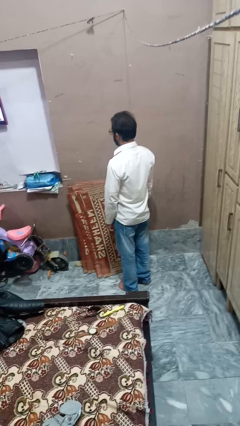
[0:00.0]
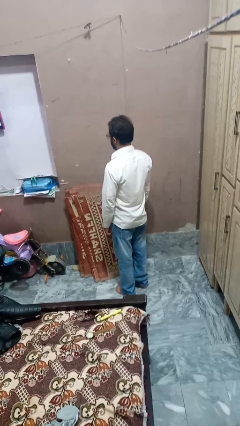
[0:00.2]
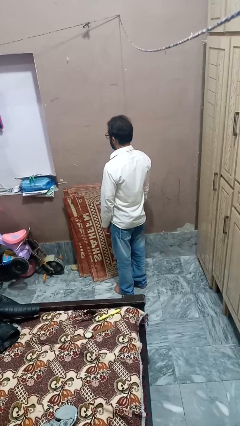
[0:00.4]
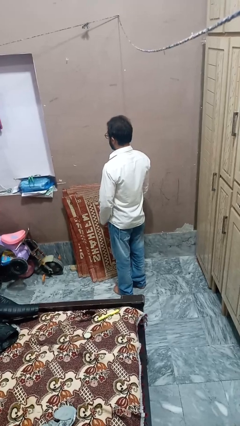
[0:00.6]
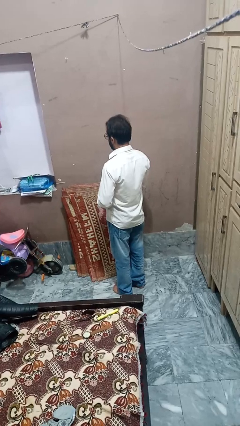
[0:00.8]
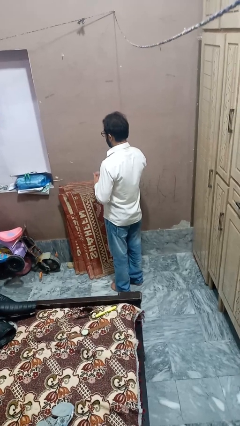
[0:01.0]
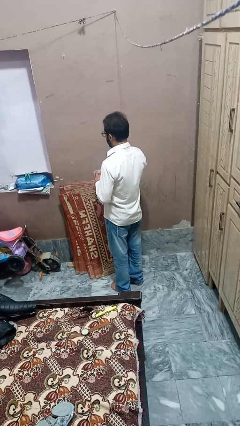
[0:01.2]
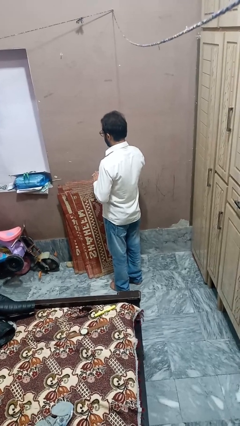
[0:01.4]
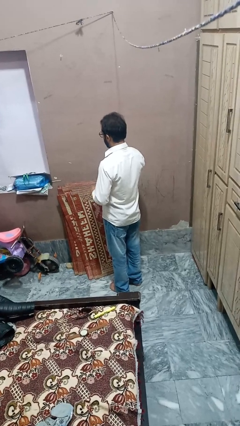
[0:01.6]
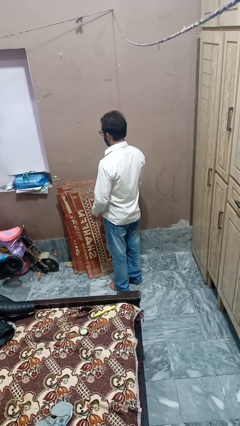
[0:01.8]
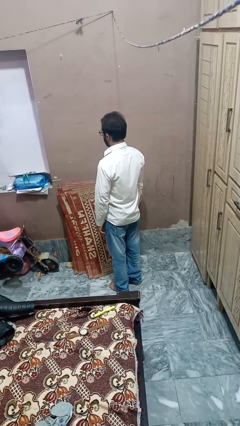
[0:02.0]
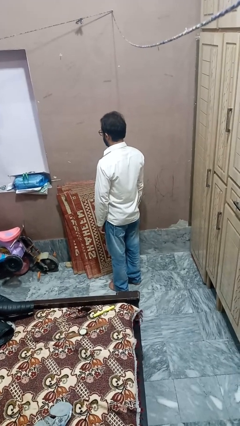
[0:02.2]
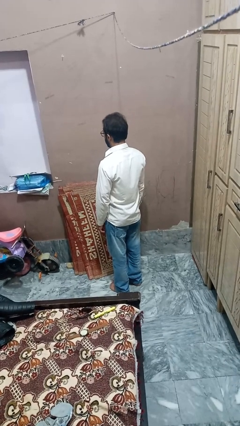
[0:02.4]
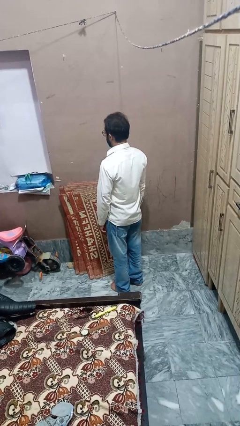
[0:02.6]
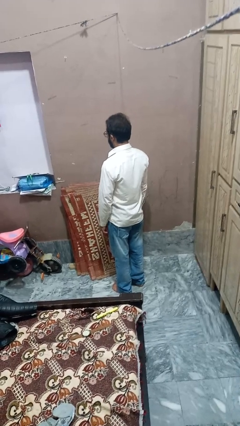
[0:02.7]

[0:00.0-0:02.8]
person puts on ring

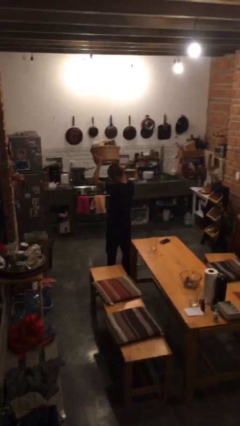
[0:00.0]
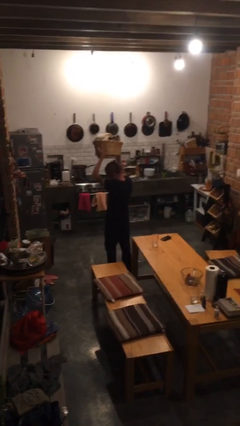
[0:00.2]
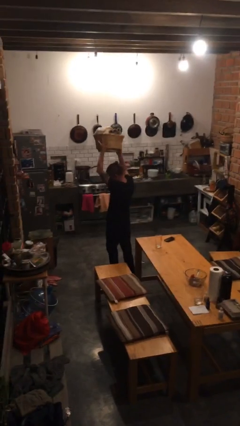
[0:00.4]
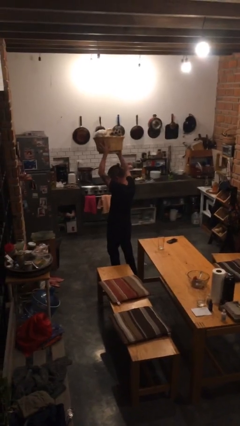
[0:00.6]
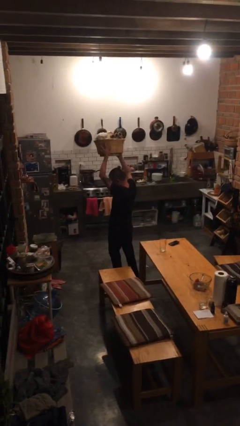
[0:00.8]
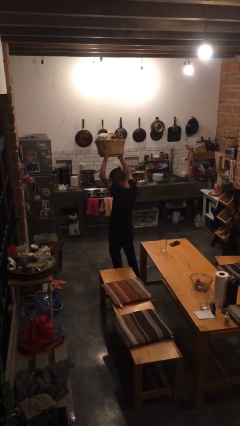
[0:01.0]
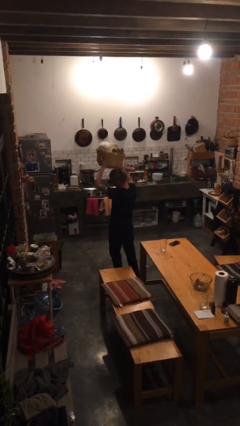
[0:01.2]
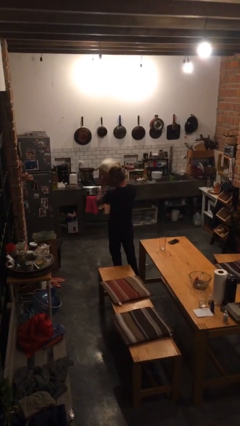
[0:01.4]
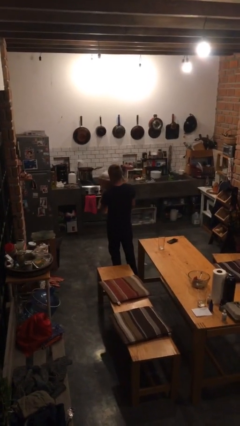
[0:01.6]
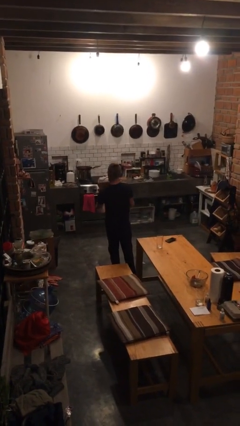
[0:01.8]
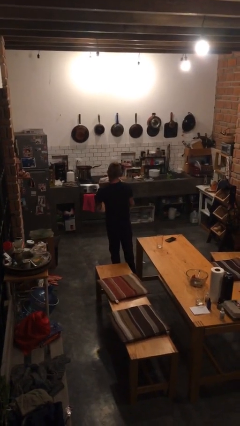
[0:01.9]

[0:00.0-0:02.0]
person holds object above head

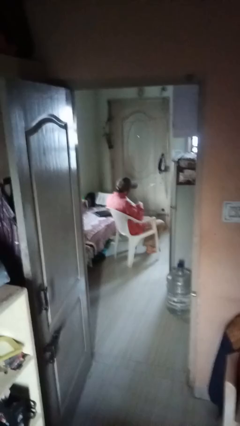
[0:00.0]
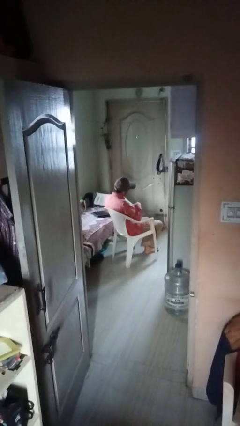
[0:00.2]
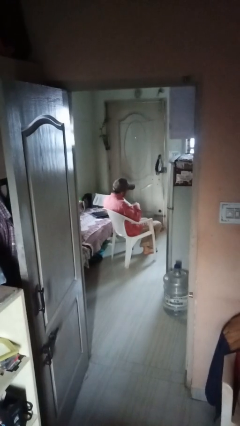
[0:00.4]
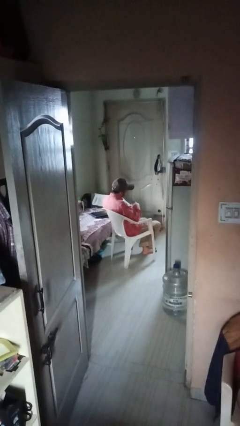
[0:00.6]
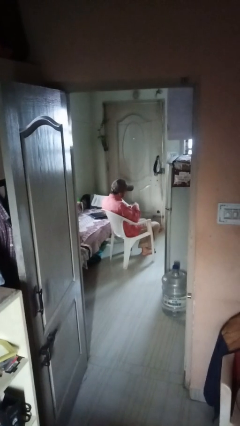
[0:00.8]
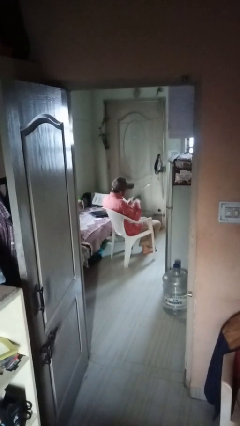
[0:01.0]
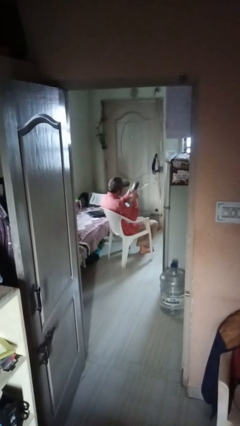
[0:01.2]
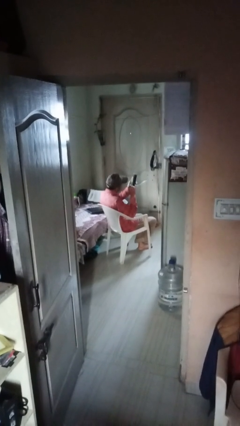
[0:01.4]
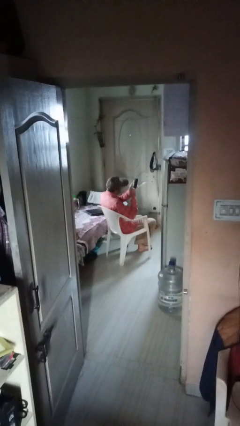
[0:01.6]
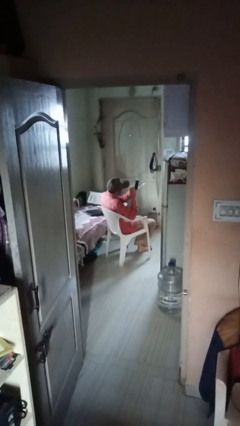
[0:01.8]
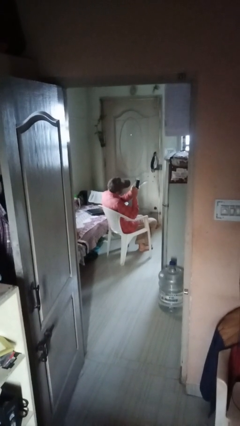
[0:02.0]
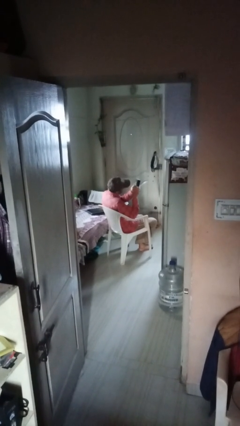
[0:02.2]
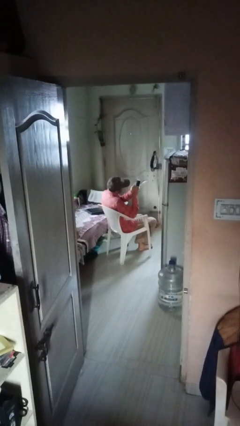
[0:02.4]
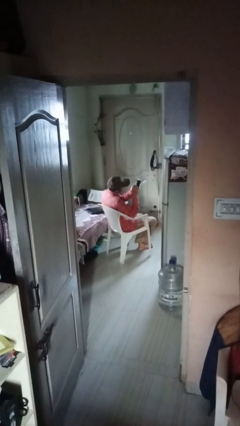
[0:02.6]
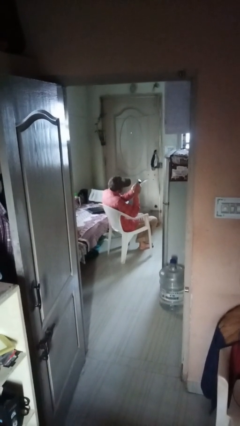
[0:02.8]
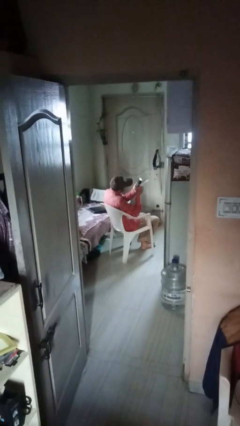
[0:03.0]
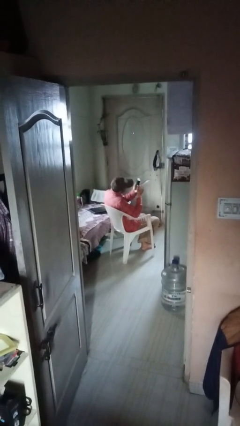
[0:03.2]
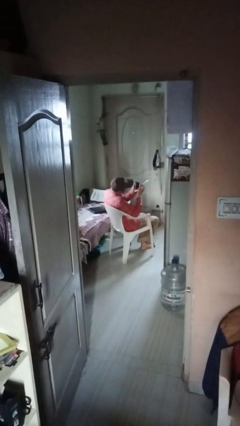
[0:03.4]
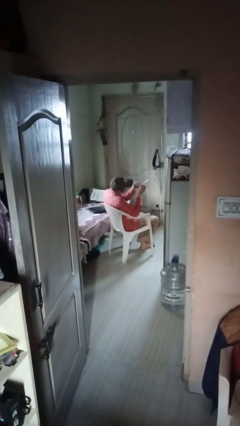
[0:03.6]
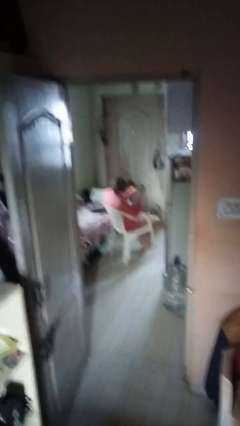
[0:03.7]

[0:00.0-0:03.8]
person taps object with finger

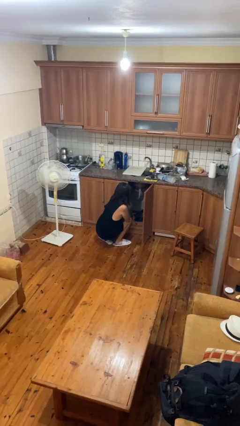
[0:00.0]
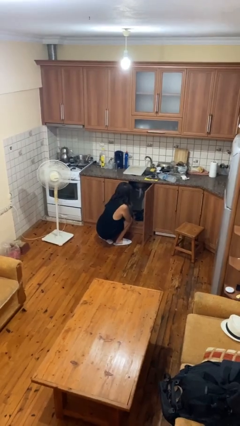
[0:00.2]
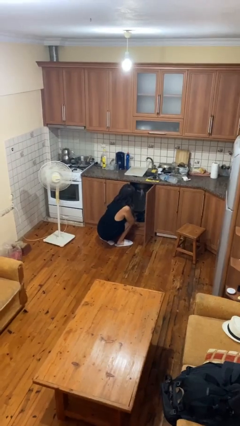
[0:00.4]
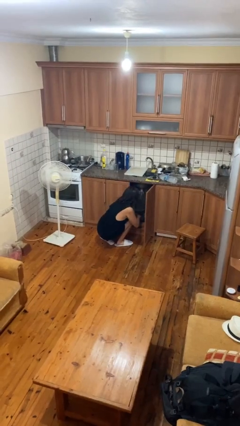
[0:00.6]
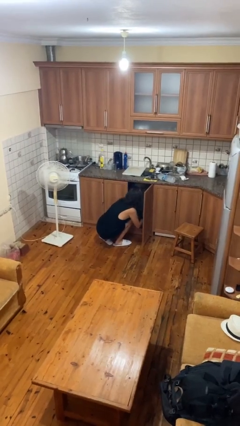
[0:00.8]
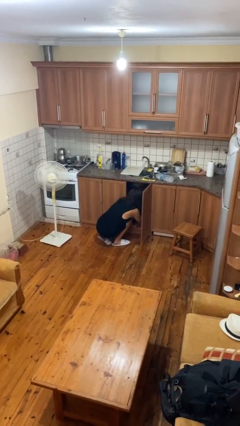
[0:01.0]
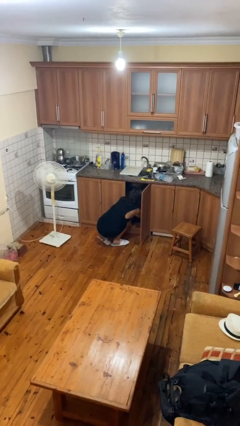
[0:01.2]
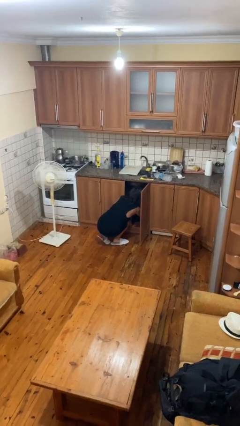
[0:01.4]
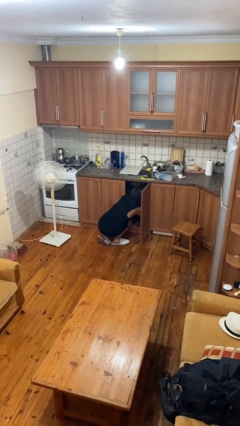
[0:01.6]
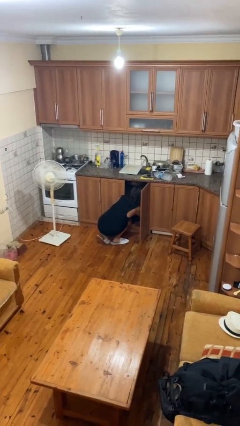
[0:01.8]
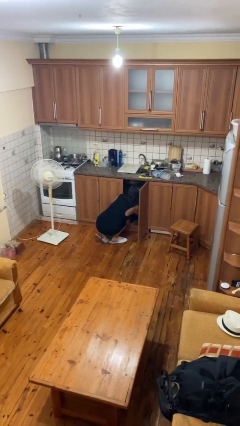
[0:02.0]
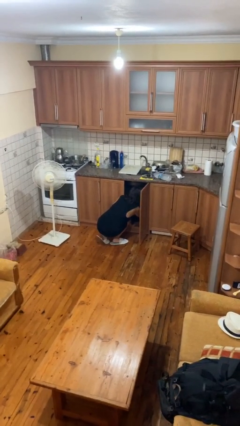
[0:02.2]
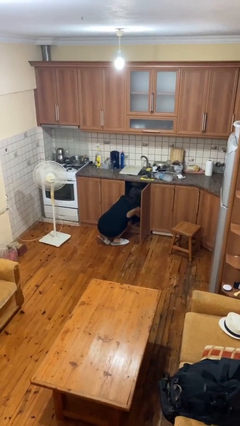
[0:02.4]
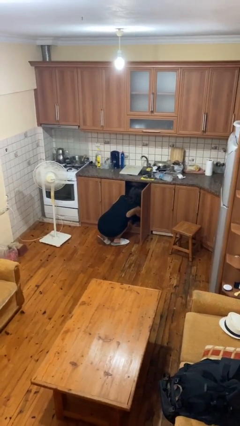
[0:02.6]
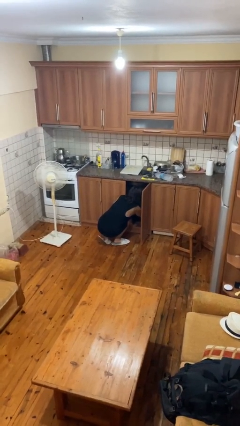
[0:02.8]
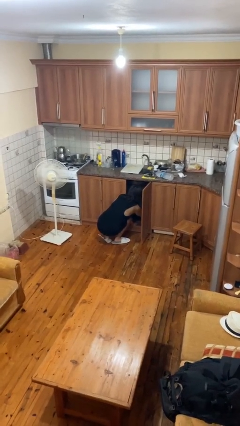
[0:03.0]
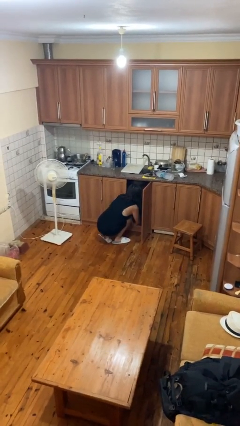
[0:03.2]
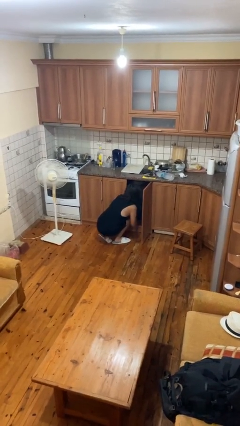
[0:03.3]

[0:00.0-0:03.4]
person searches in cabinet

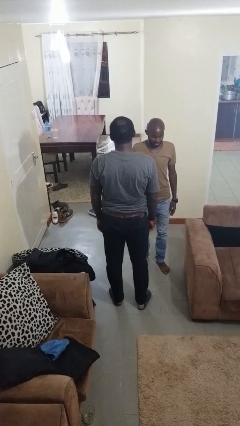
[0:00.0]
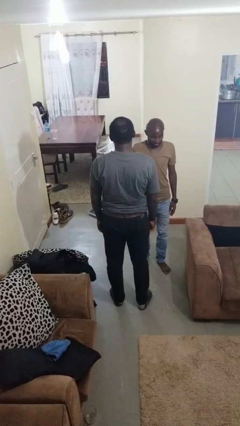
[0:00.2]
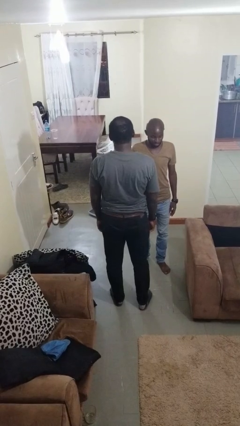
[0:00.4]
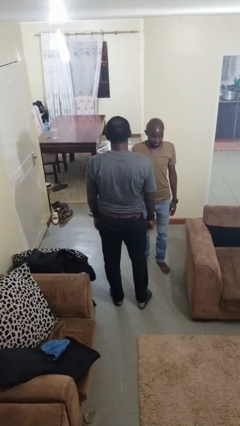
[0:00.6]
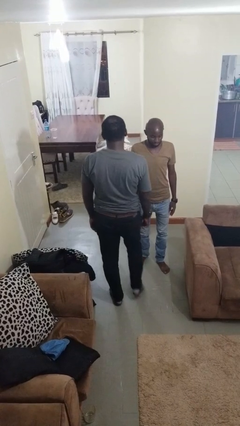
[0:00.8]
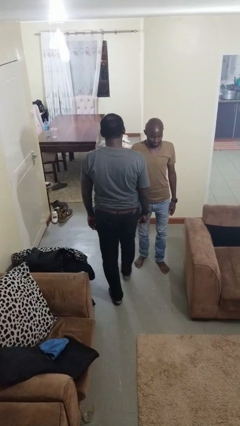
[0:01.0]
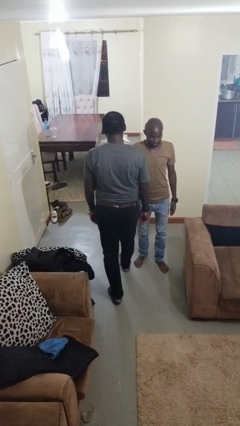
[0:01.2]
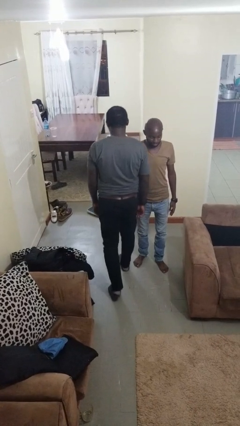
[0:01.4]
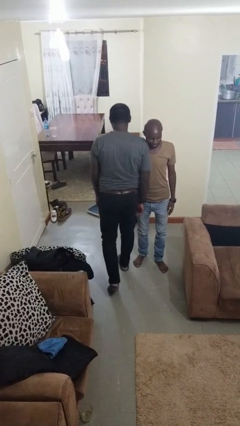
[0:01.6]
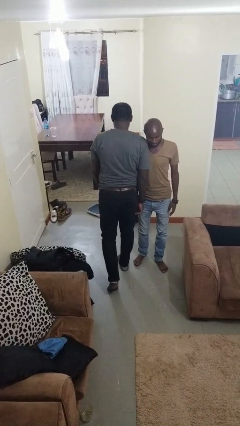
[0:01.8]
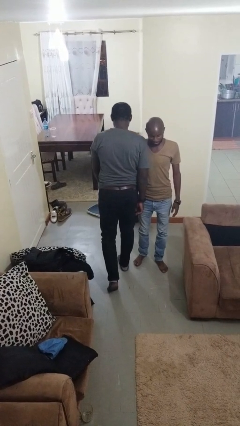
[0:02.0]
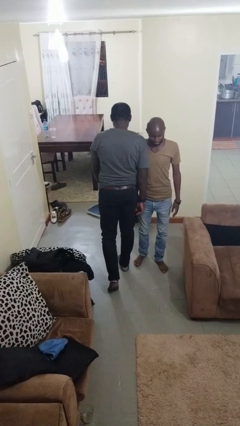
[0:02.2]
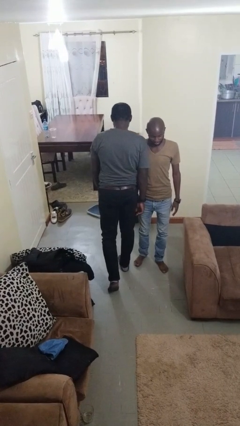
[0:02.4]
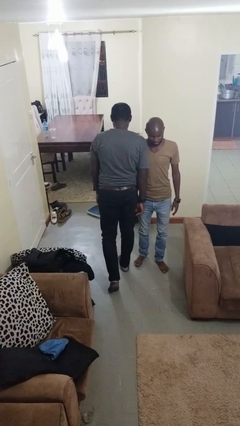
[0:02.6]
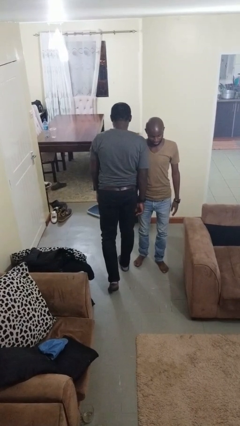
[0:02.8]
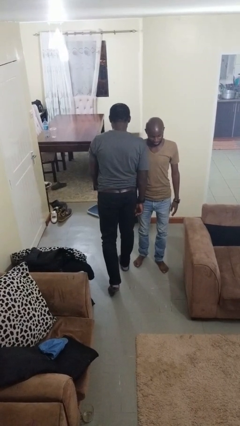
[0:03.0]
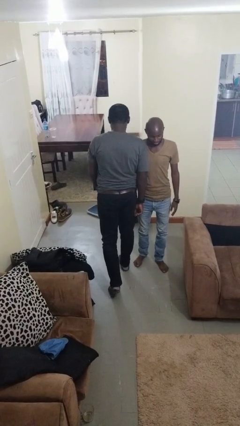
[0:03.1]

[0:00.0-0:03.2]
person bumps into person

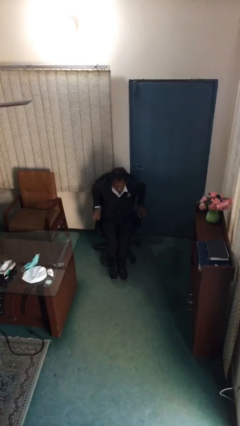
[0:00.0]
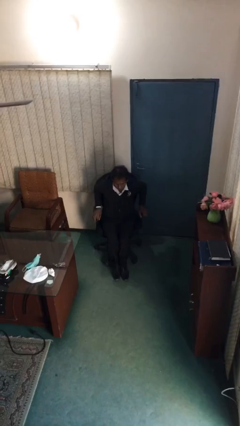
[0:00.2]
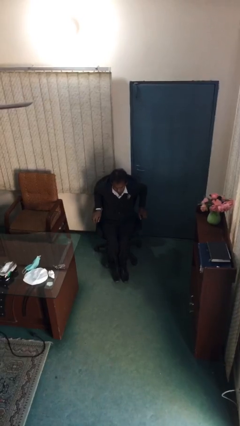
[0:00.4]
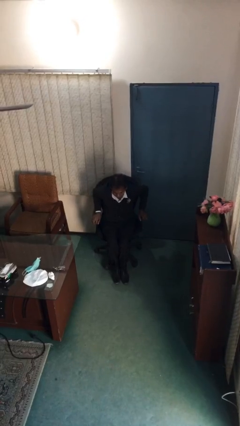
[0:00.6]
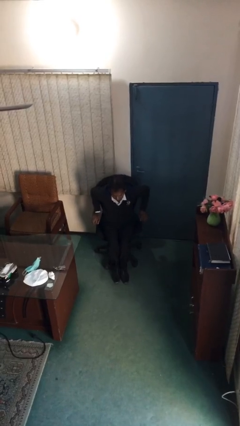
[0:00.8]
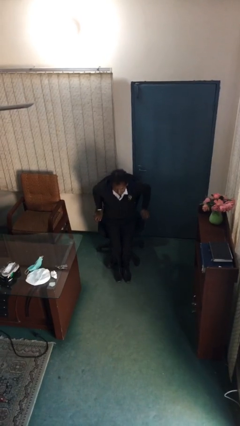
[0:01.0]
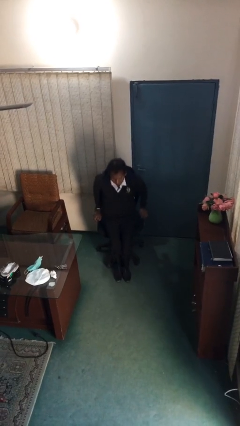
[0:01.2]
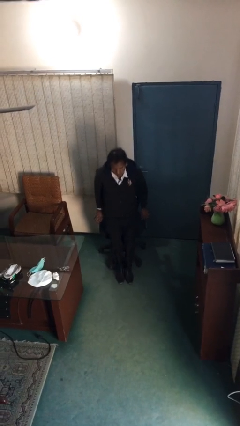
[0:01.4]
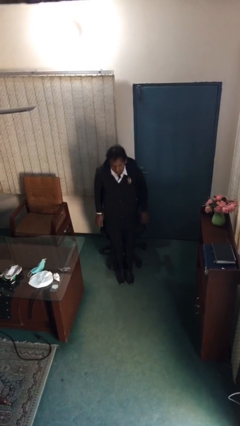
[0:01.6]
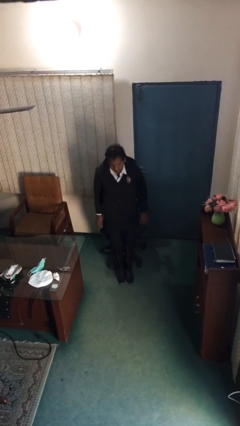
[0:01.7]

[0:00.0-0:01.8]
person stands up

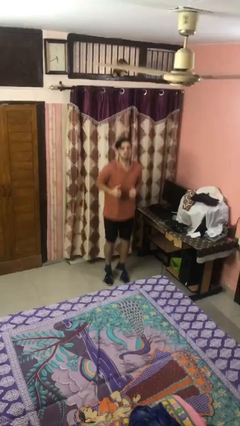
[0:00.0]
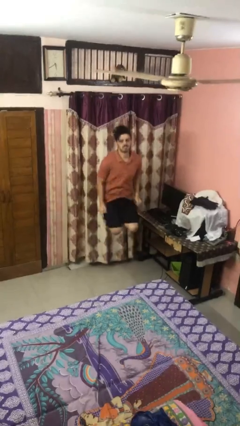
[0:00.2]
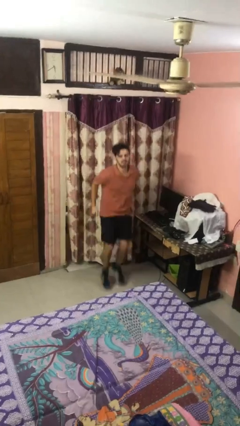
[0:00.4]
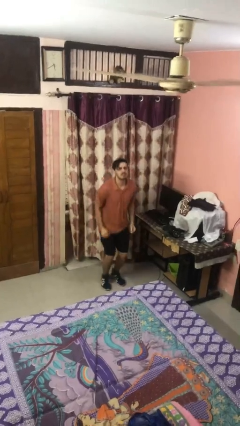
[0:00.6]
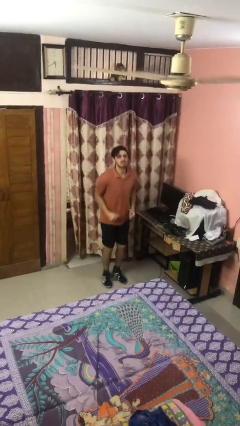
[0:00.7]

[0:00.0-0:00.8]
person jumps
